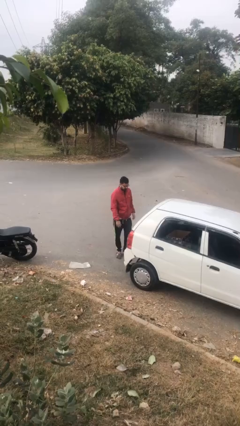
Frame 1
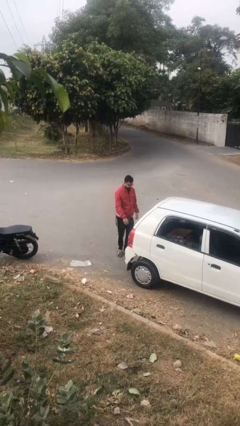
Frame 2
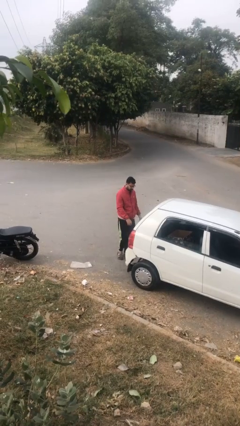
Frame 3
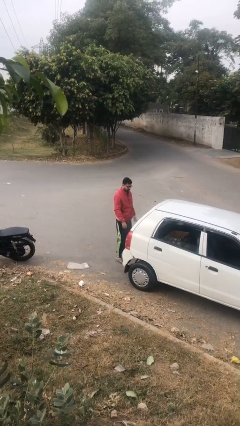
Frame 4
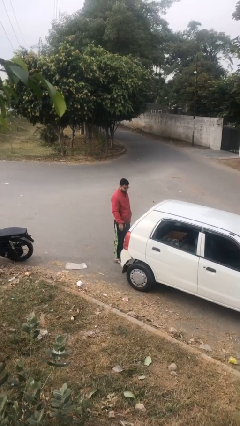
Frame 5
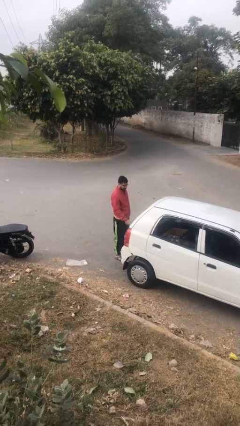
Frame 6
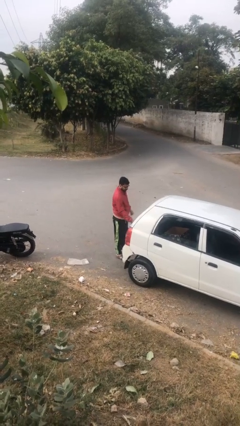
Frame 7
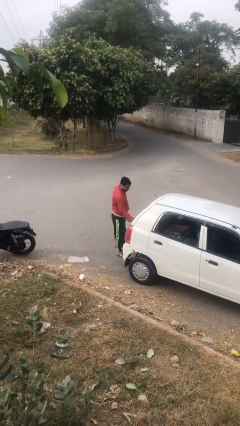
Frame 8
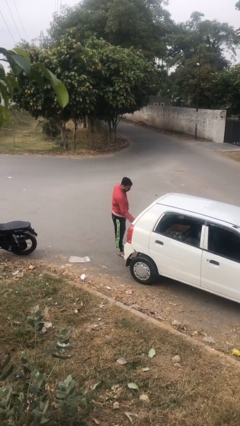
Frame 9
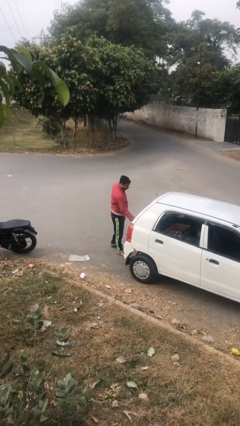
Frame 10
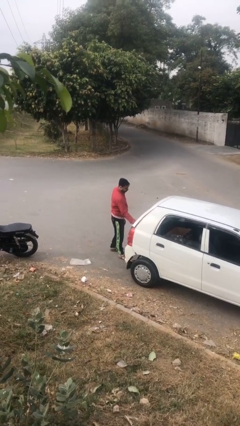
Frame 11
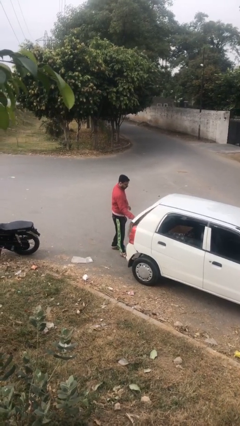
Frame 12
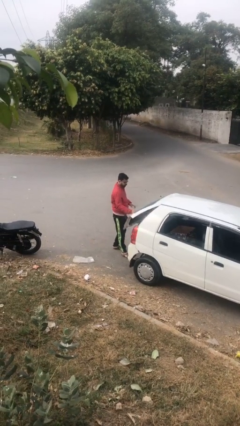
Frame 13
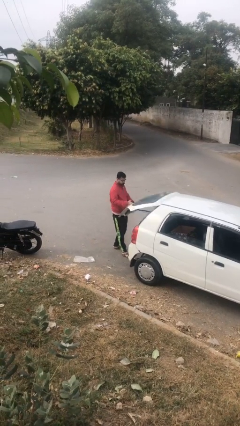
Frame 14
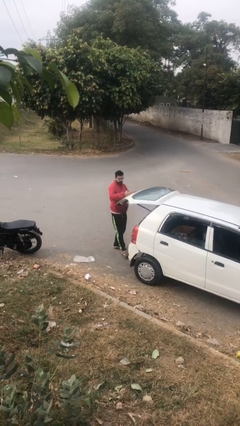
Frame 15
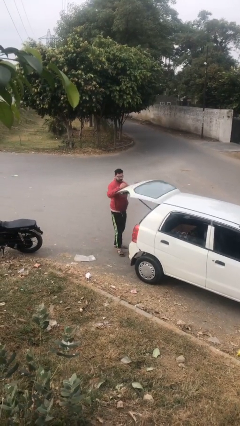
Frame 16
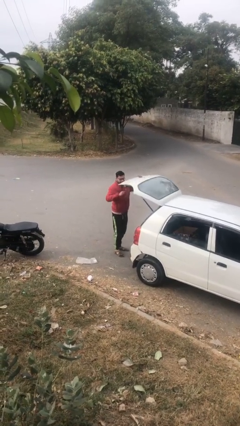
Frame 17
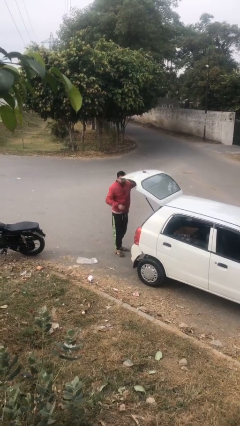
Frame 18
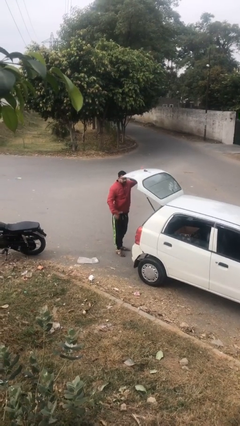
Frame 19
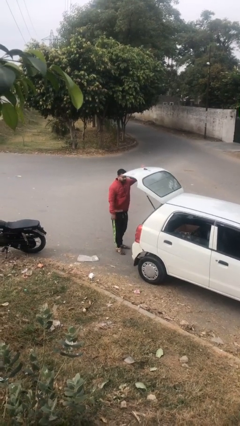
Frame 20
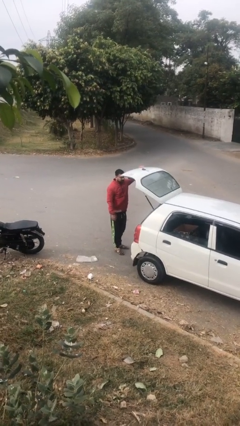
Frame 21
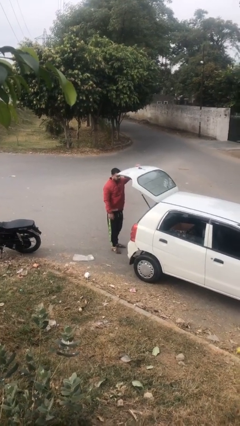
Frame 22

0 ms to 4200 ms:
person opens car trunk

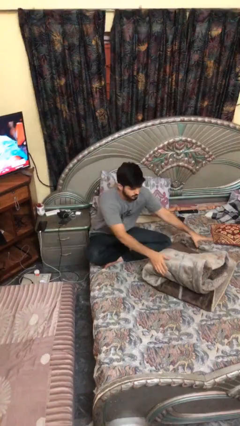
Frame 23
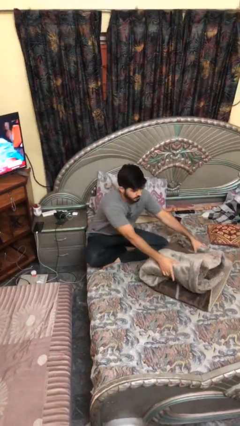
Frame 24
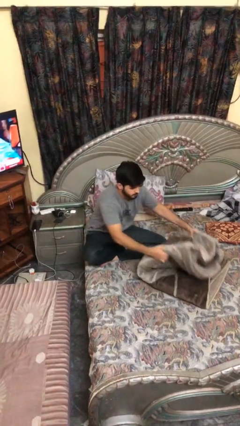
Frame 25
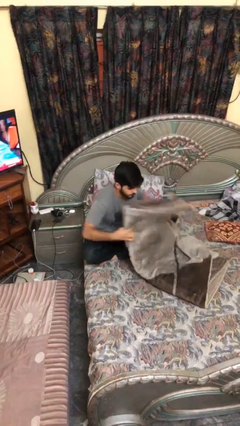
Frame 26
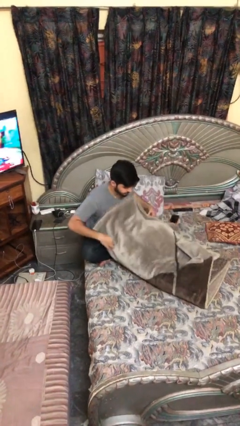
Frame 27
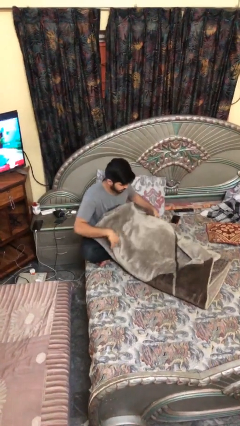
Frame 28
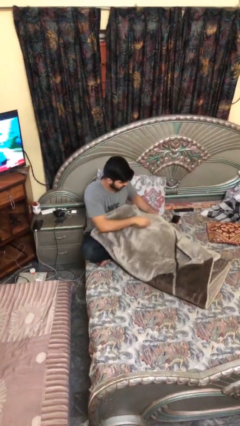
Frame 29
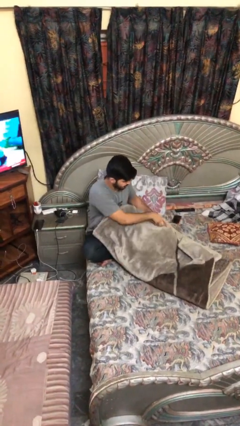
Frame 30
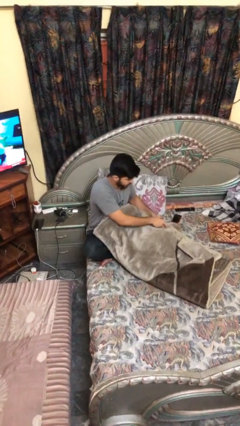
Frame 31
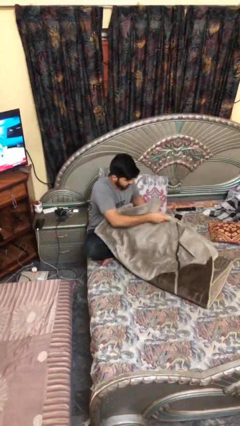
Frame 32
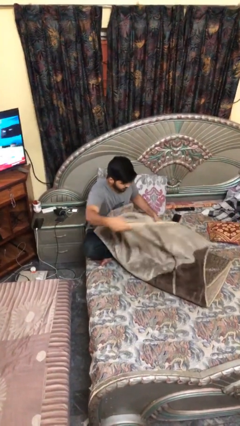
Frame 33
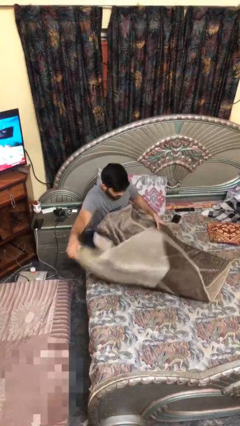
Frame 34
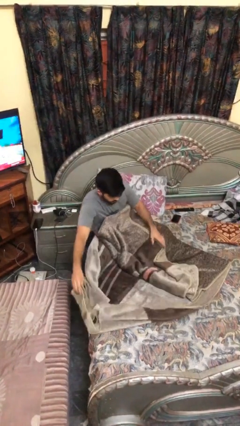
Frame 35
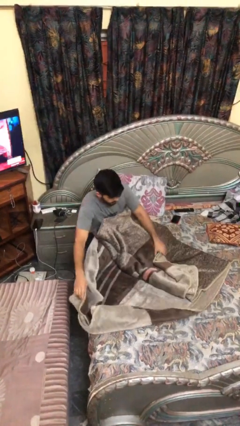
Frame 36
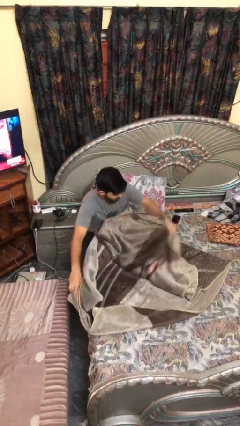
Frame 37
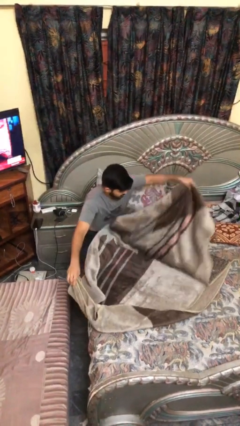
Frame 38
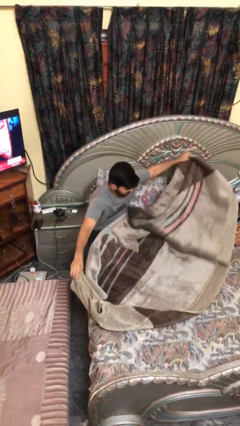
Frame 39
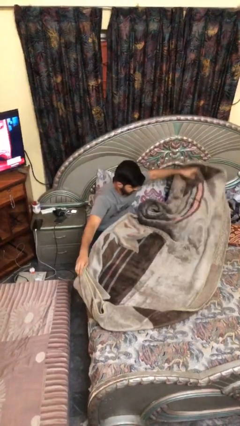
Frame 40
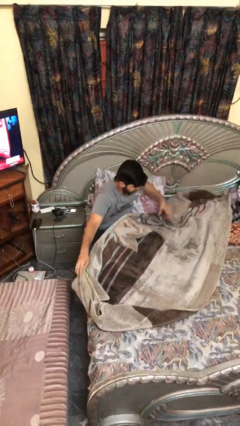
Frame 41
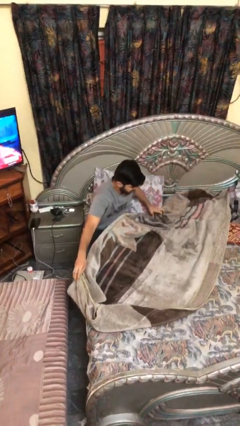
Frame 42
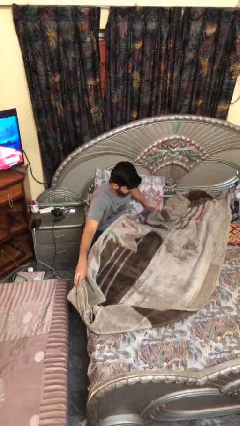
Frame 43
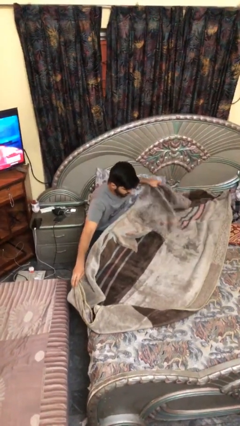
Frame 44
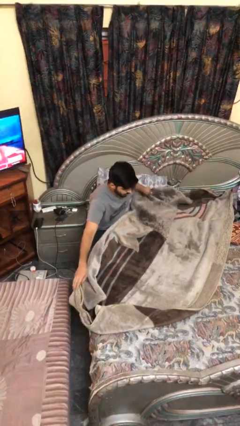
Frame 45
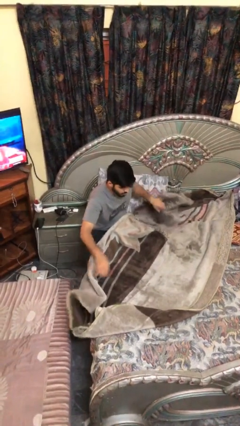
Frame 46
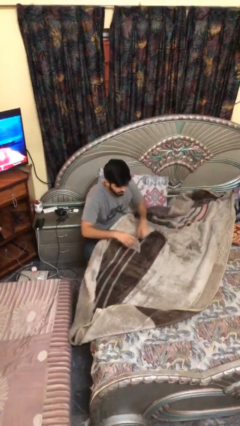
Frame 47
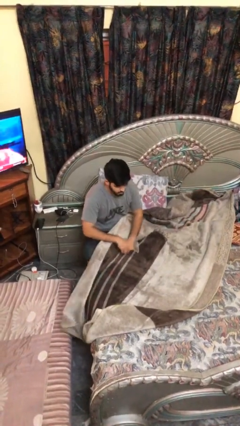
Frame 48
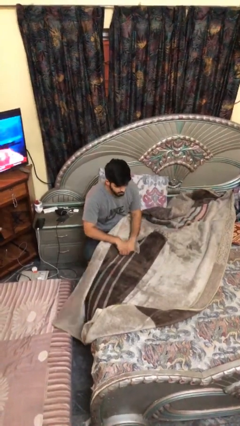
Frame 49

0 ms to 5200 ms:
person unfolds blanket

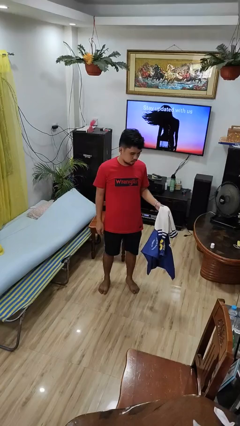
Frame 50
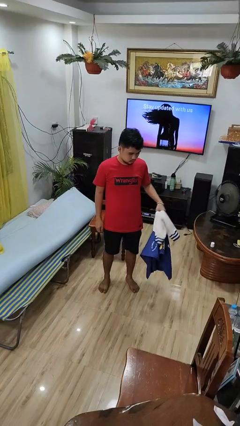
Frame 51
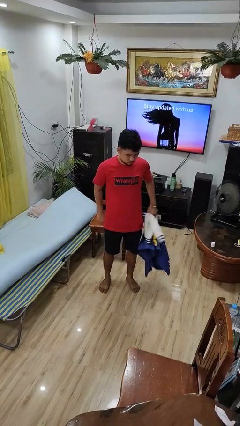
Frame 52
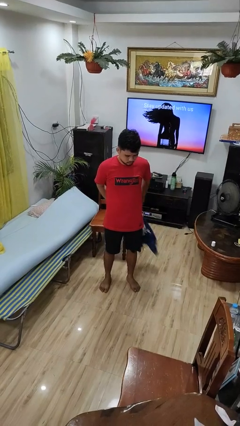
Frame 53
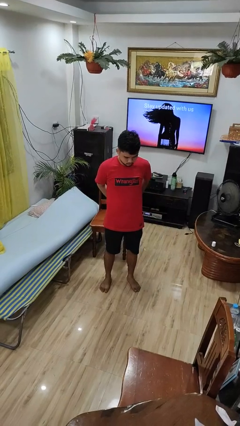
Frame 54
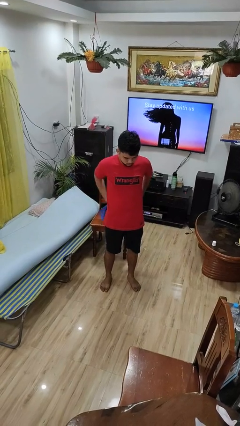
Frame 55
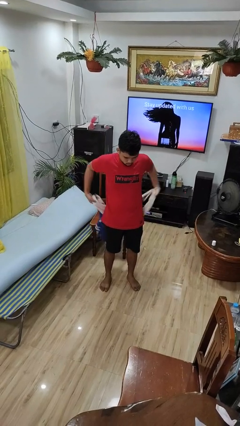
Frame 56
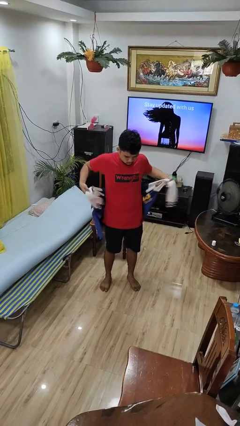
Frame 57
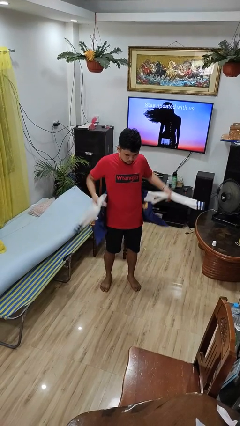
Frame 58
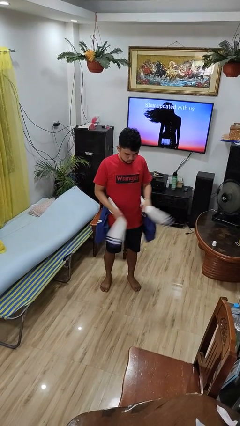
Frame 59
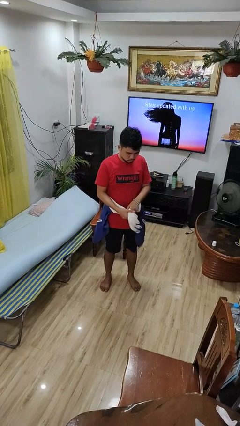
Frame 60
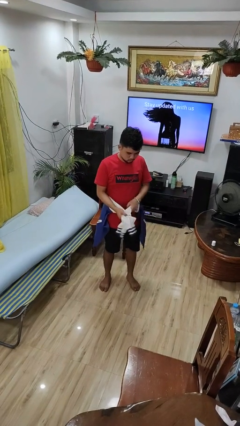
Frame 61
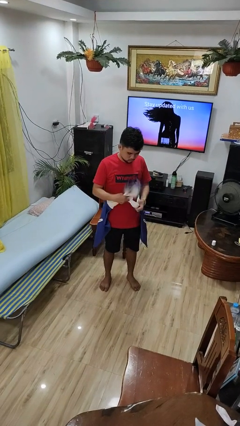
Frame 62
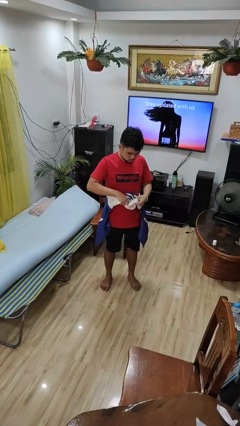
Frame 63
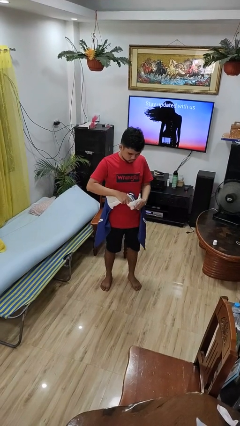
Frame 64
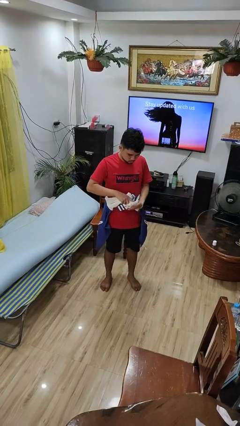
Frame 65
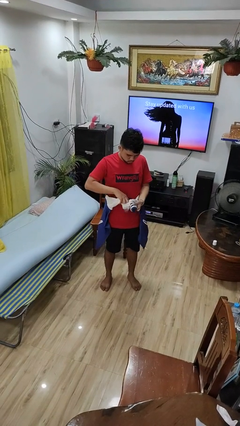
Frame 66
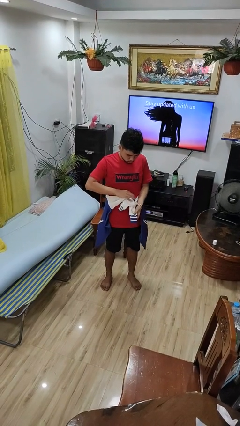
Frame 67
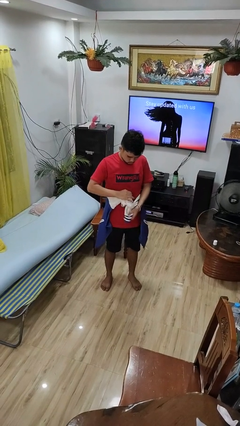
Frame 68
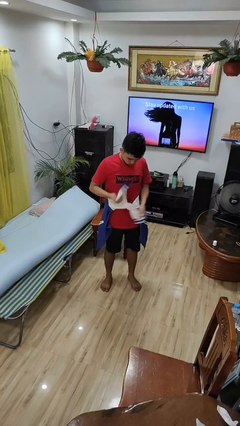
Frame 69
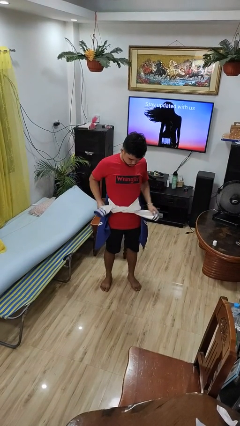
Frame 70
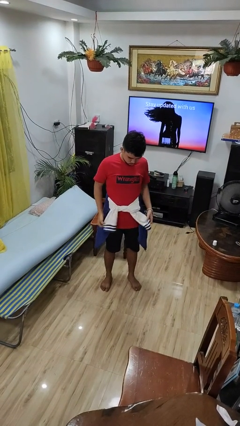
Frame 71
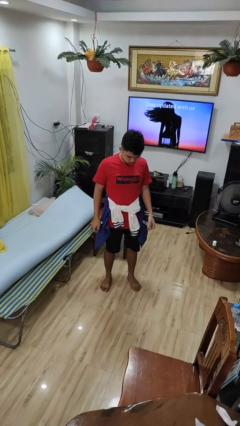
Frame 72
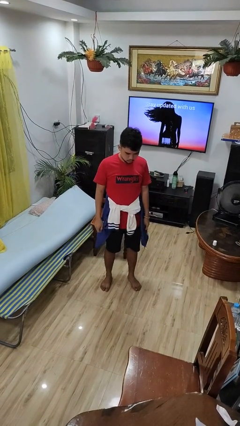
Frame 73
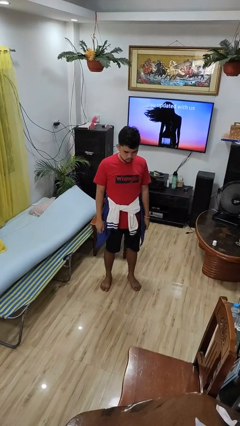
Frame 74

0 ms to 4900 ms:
person ties jacket around waist

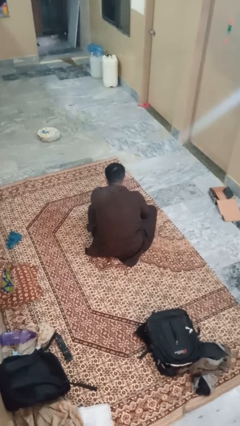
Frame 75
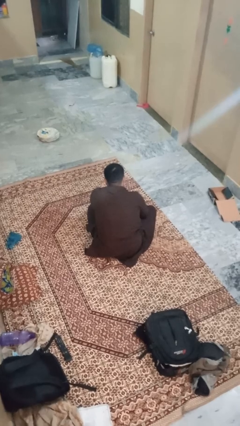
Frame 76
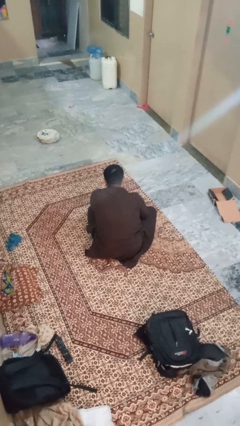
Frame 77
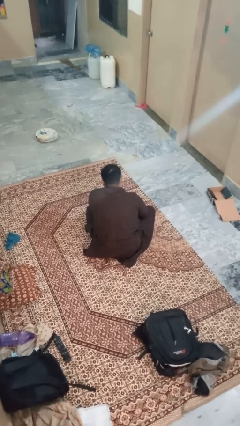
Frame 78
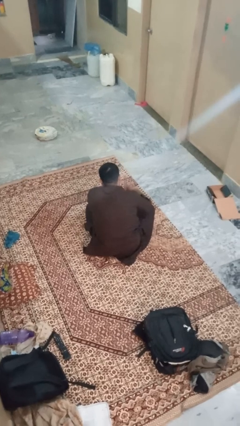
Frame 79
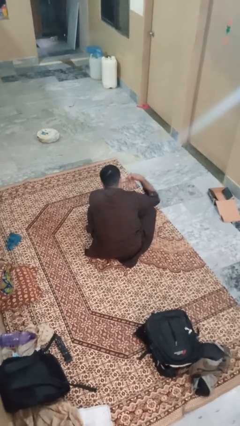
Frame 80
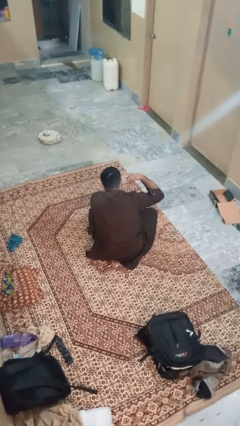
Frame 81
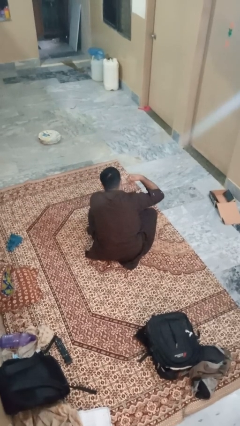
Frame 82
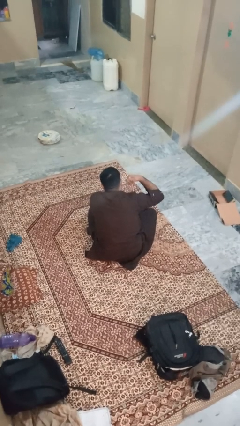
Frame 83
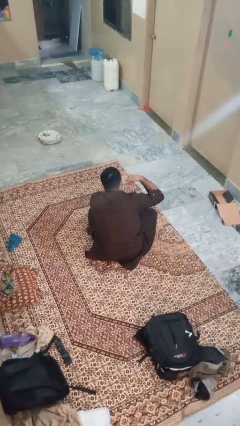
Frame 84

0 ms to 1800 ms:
person gestures call me

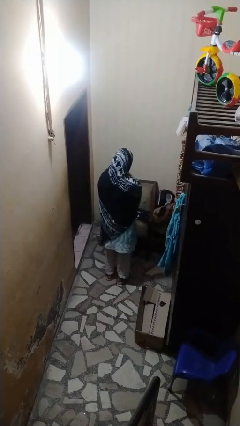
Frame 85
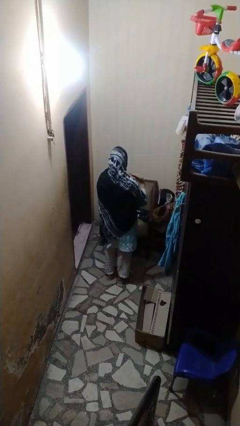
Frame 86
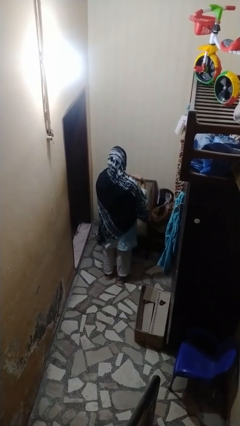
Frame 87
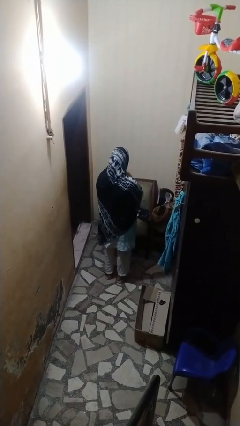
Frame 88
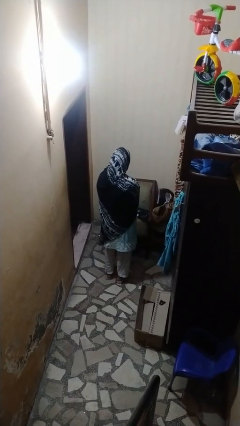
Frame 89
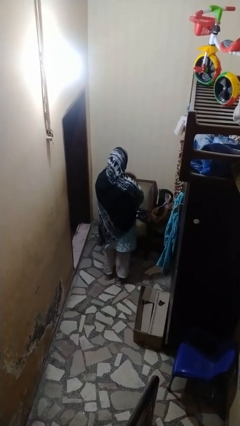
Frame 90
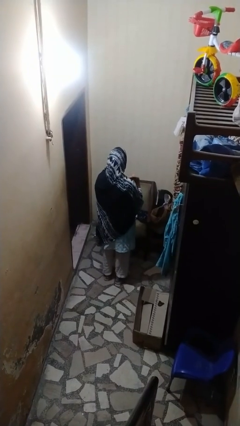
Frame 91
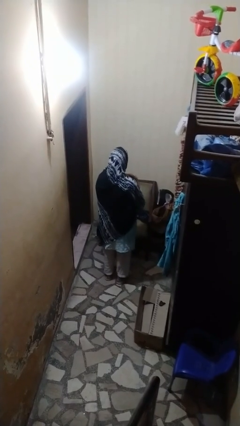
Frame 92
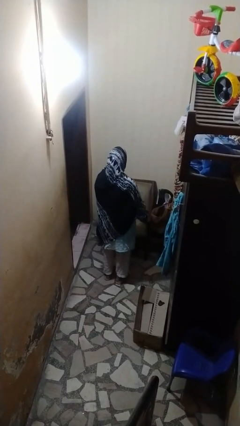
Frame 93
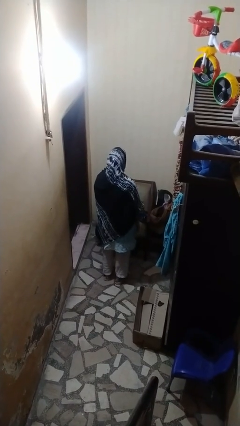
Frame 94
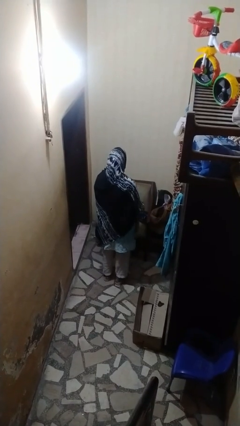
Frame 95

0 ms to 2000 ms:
person gestures cut
